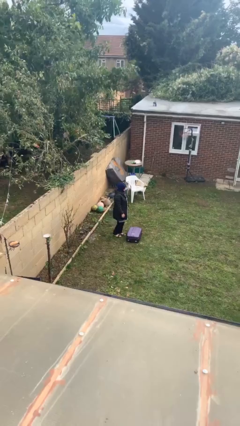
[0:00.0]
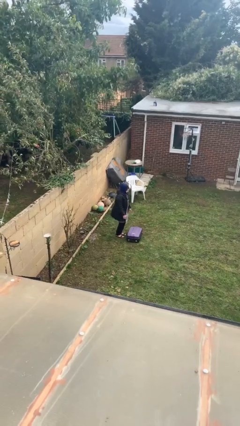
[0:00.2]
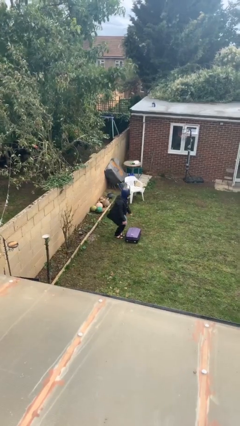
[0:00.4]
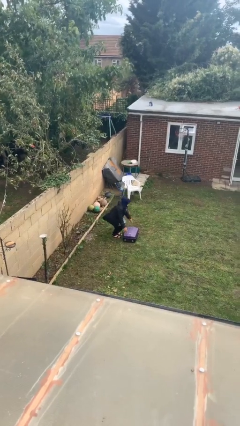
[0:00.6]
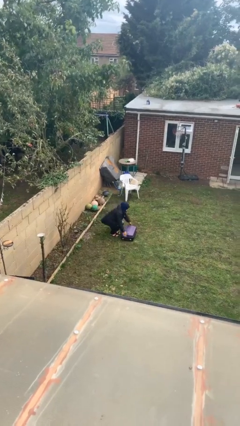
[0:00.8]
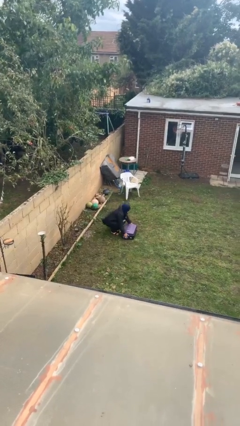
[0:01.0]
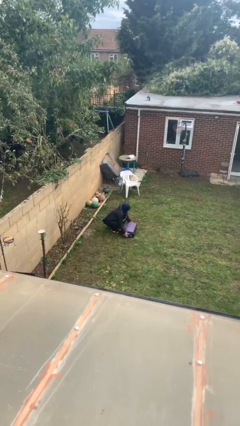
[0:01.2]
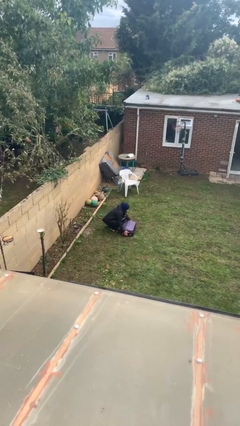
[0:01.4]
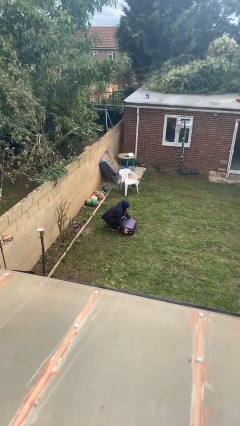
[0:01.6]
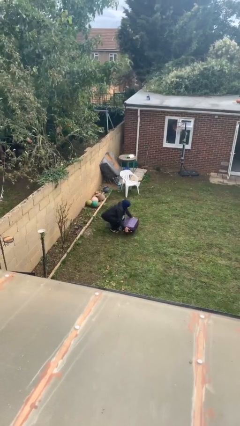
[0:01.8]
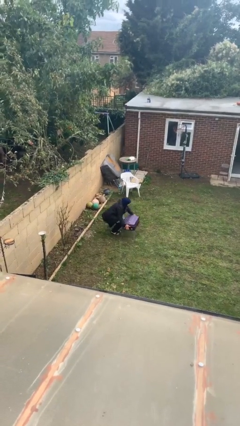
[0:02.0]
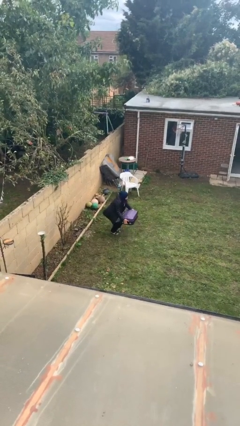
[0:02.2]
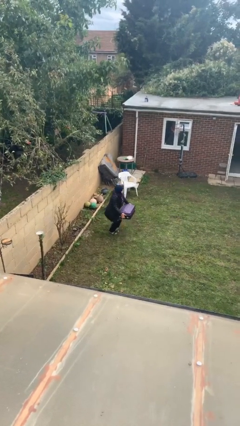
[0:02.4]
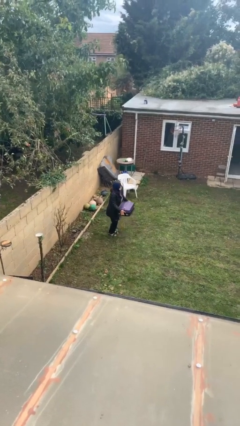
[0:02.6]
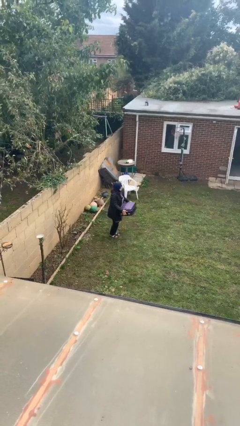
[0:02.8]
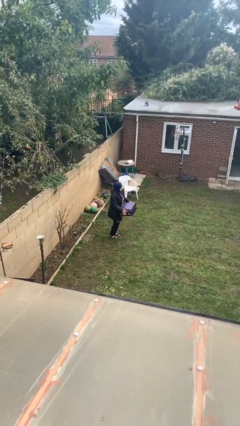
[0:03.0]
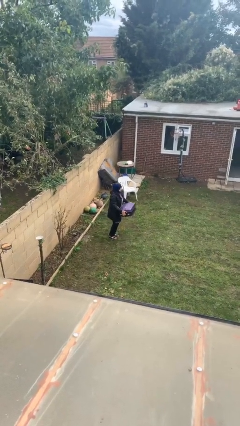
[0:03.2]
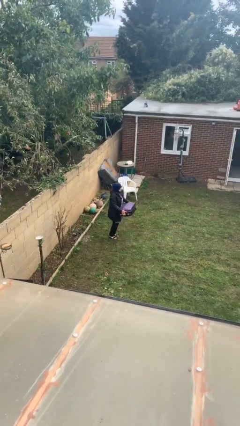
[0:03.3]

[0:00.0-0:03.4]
person picks up object from floor

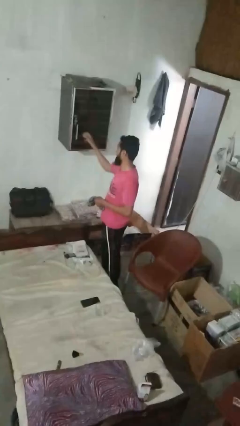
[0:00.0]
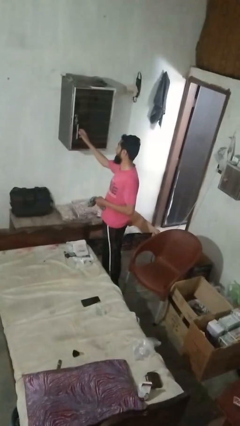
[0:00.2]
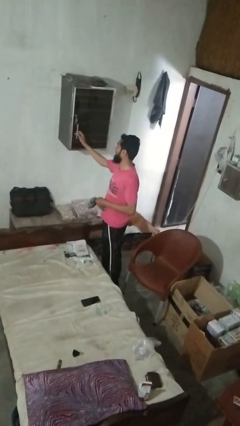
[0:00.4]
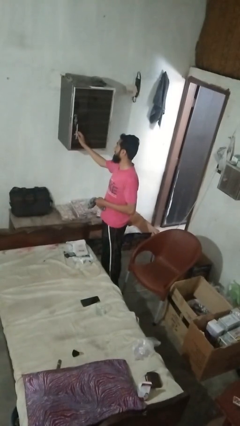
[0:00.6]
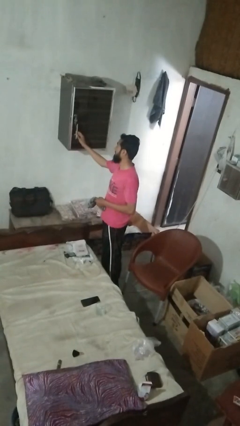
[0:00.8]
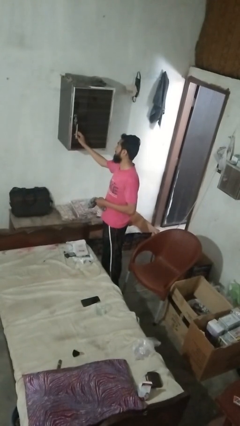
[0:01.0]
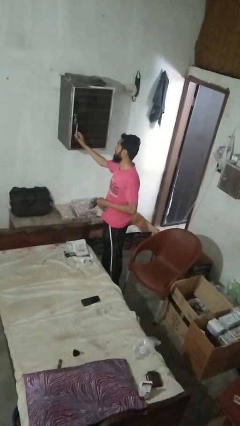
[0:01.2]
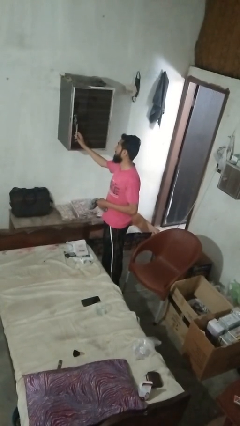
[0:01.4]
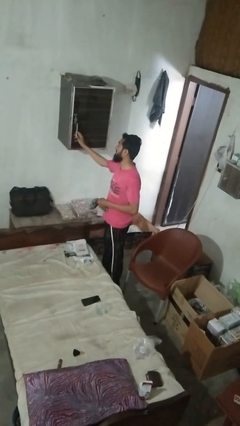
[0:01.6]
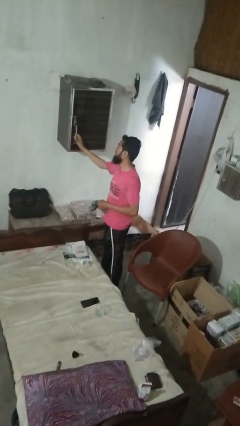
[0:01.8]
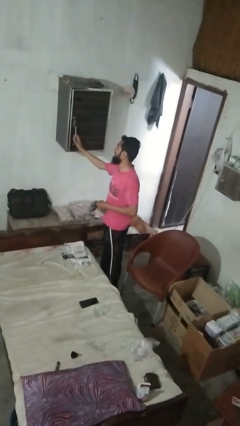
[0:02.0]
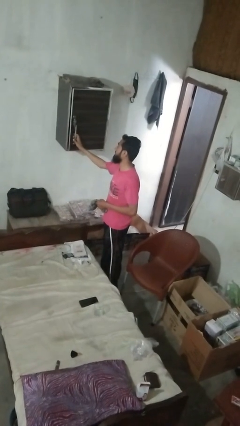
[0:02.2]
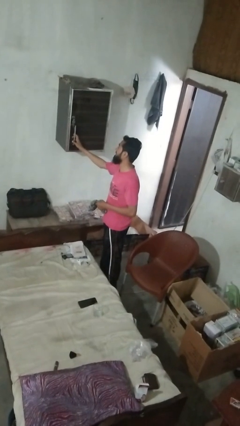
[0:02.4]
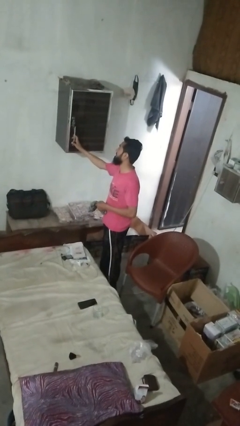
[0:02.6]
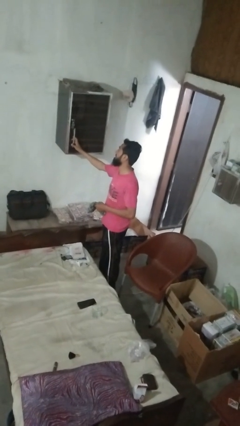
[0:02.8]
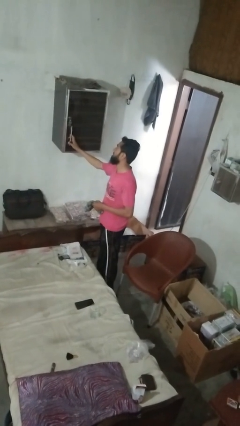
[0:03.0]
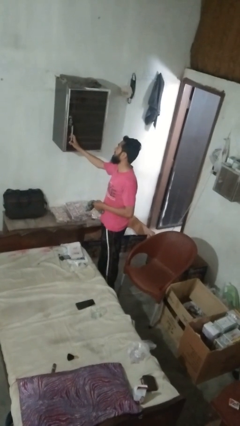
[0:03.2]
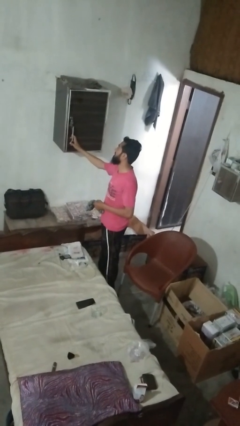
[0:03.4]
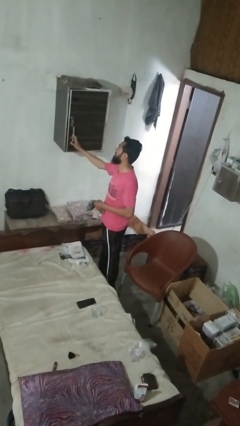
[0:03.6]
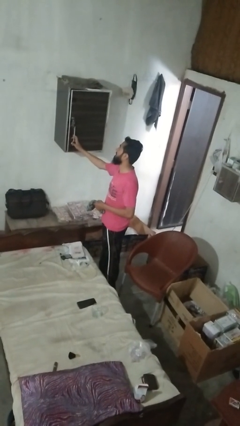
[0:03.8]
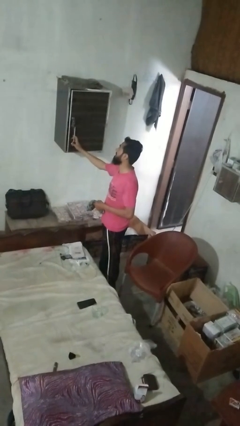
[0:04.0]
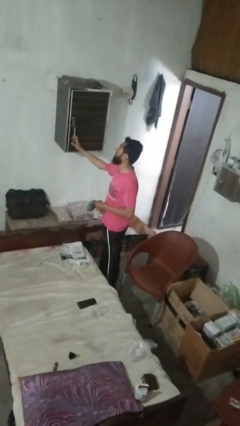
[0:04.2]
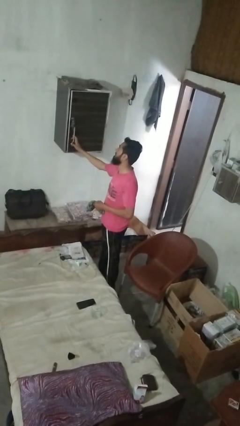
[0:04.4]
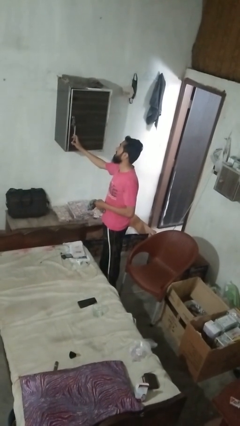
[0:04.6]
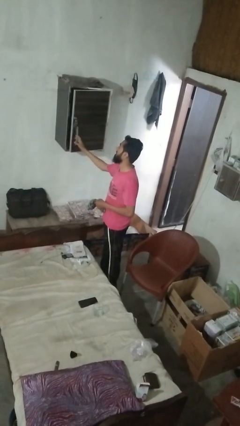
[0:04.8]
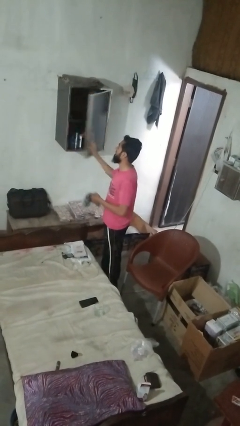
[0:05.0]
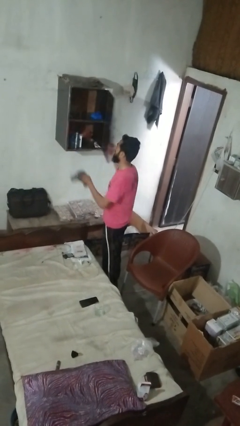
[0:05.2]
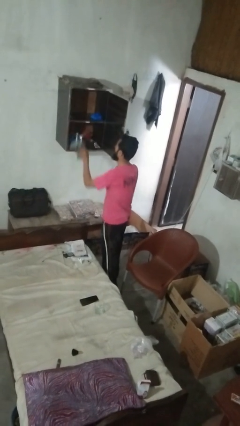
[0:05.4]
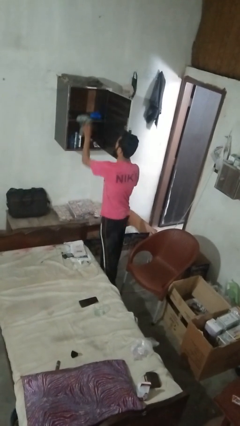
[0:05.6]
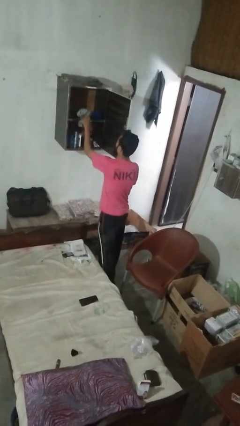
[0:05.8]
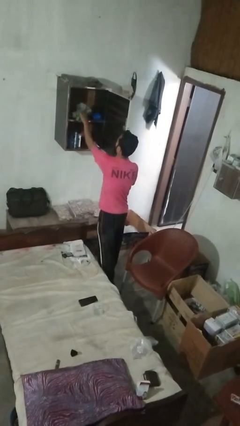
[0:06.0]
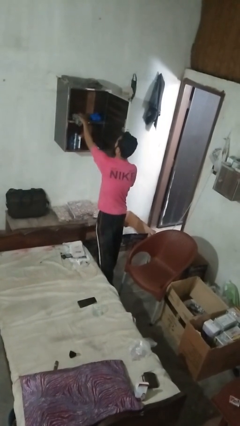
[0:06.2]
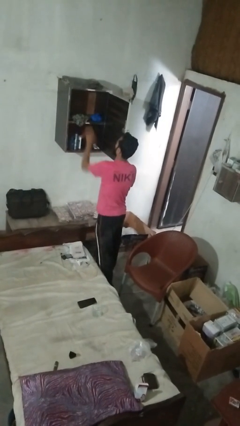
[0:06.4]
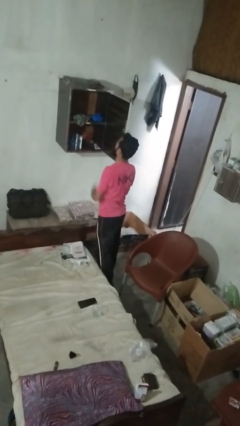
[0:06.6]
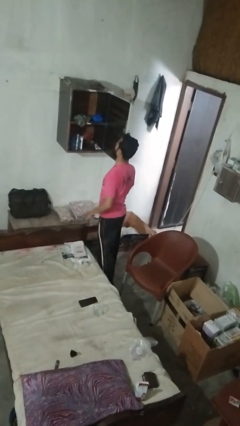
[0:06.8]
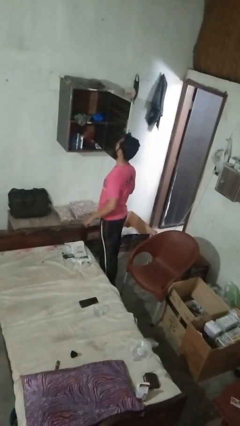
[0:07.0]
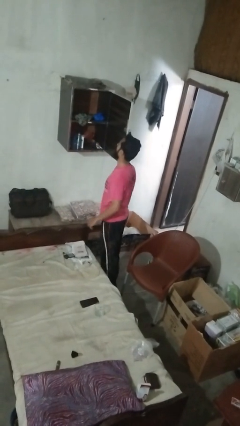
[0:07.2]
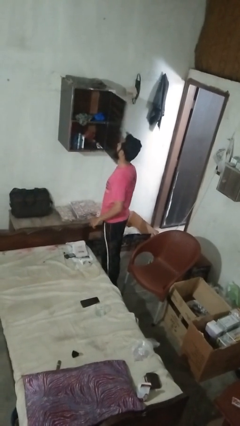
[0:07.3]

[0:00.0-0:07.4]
person puts clothes into dresser

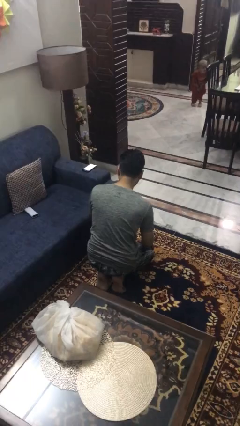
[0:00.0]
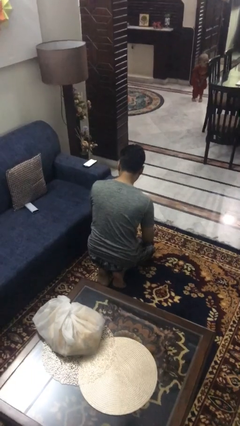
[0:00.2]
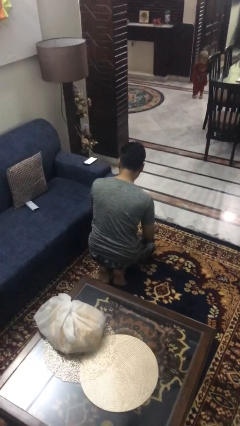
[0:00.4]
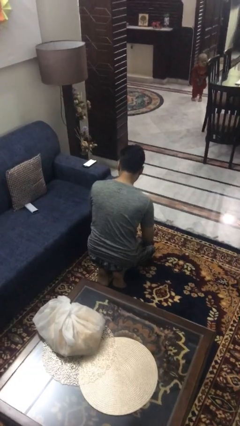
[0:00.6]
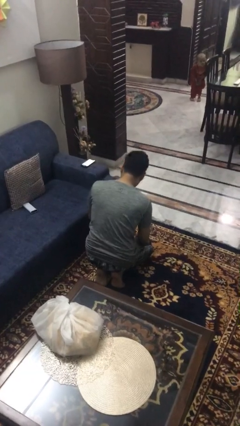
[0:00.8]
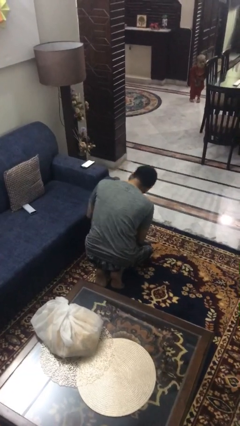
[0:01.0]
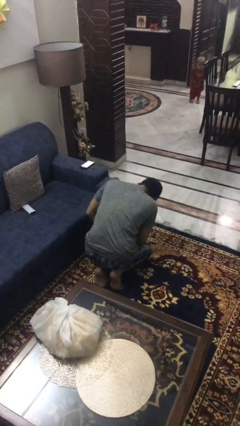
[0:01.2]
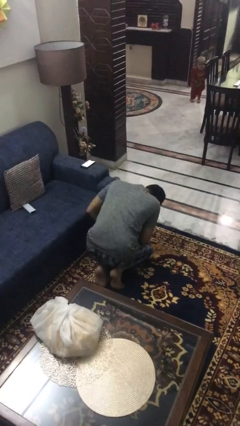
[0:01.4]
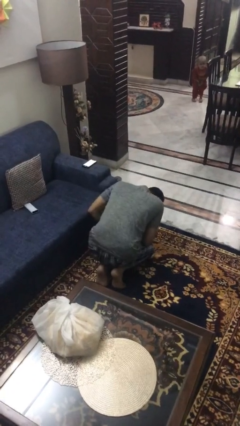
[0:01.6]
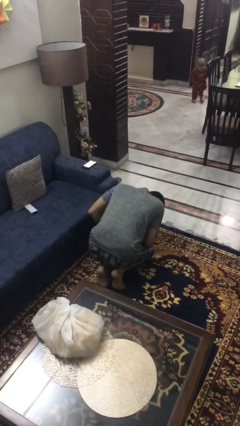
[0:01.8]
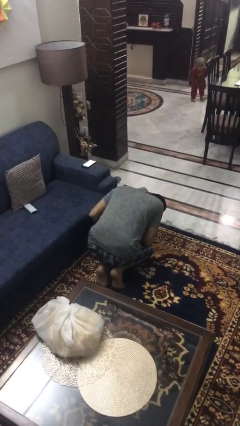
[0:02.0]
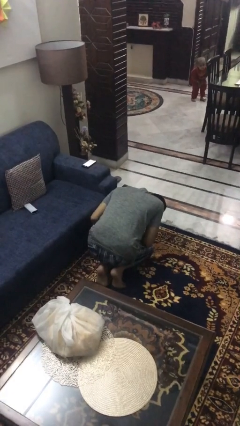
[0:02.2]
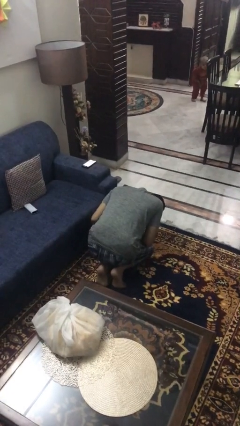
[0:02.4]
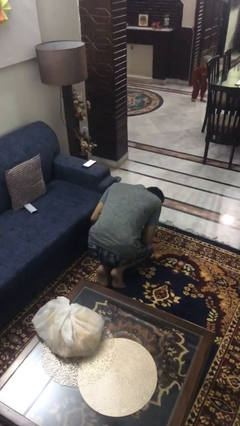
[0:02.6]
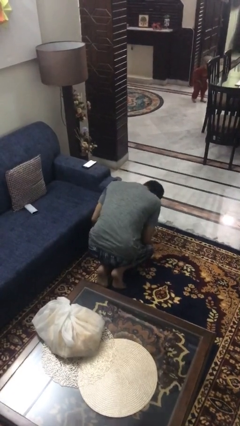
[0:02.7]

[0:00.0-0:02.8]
person searches under couch

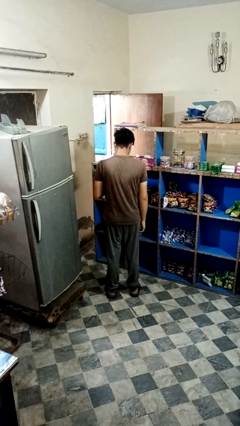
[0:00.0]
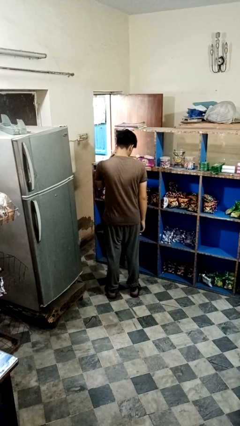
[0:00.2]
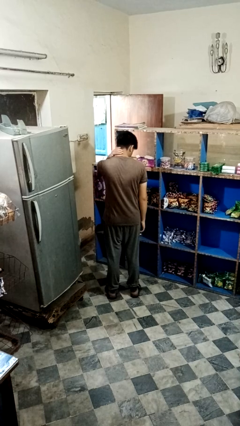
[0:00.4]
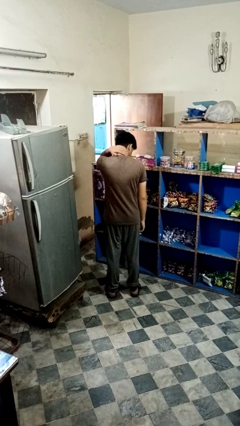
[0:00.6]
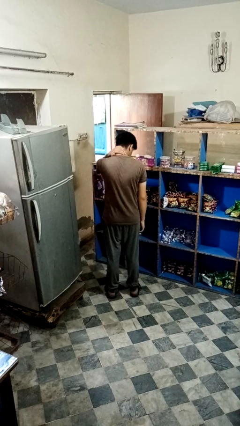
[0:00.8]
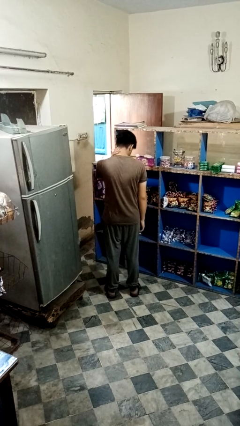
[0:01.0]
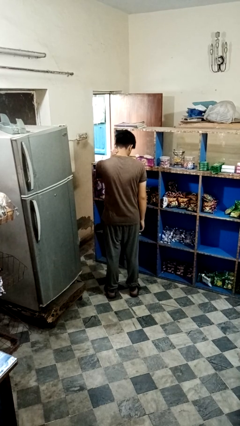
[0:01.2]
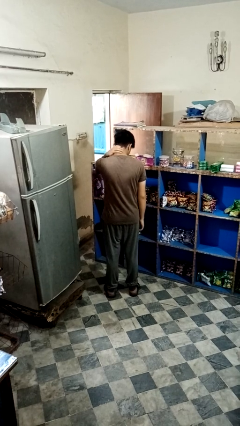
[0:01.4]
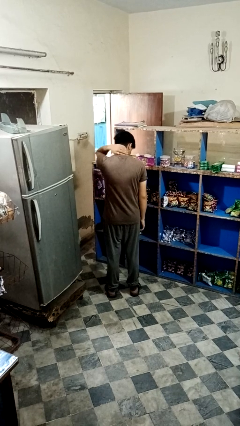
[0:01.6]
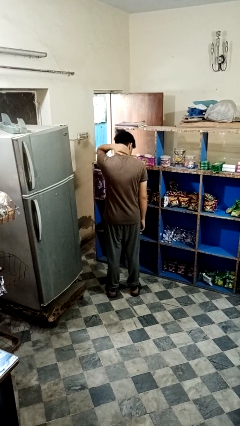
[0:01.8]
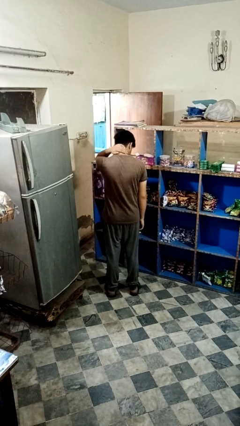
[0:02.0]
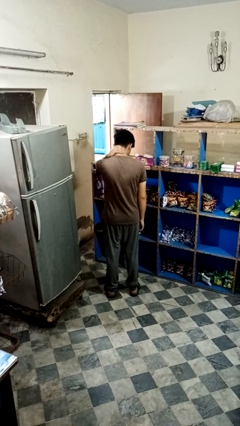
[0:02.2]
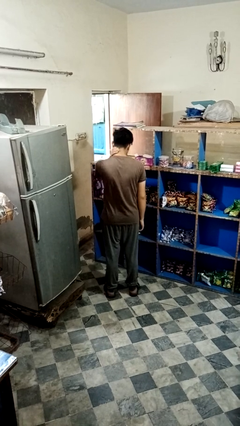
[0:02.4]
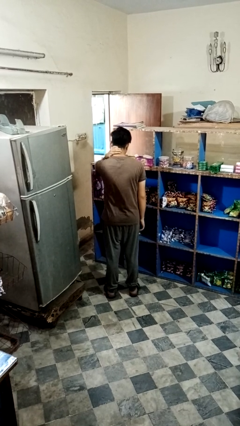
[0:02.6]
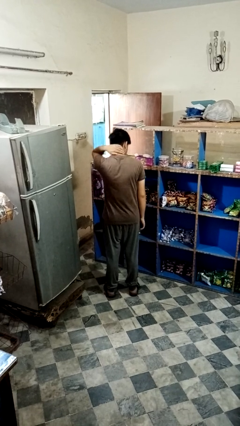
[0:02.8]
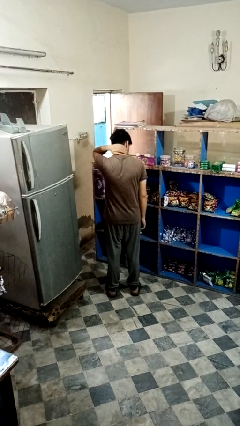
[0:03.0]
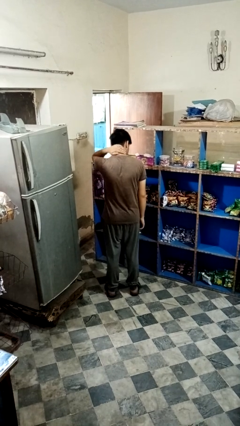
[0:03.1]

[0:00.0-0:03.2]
person rubs neck

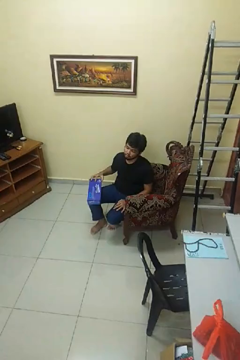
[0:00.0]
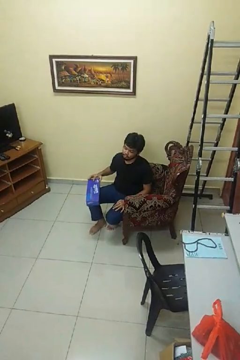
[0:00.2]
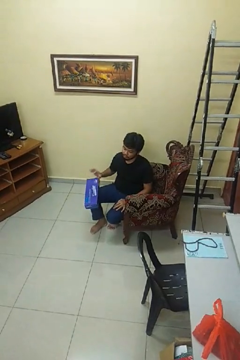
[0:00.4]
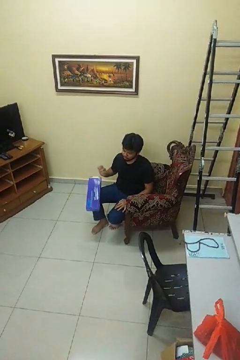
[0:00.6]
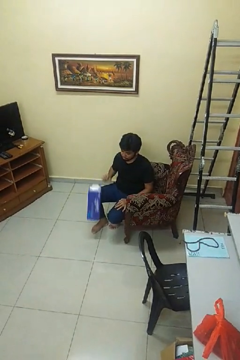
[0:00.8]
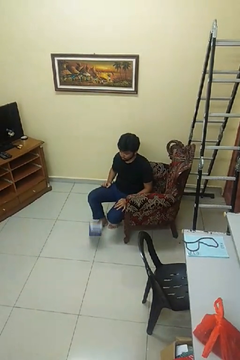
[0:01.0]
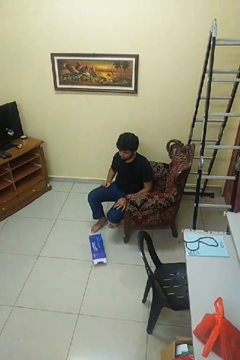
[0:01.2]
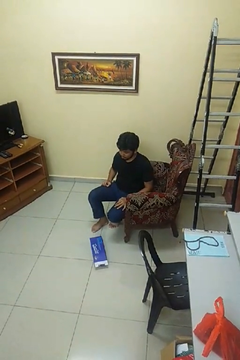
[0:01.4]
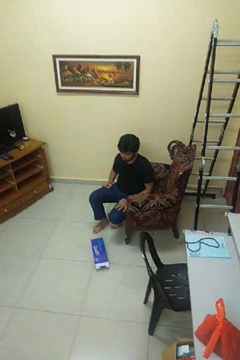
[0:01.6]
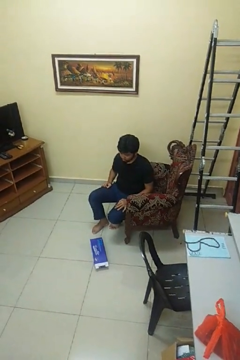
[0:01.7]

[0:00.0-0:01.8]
person drops object
